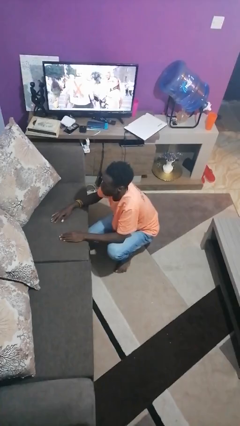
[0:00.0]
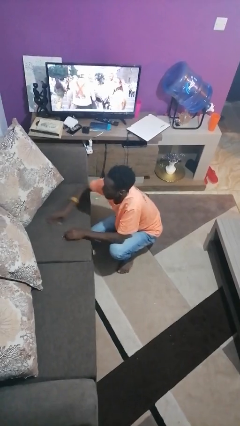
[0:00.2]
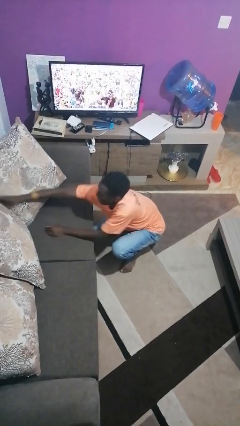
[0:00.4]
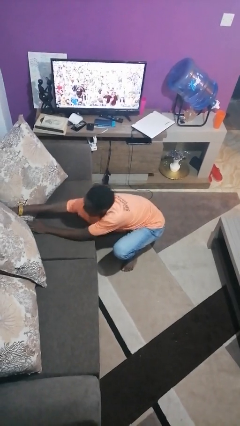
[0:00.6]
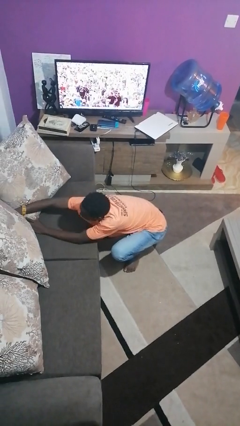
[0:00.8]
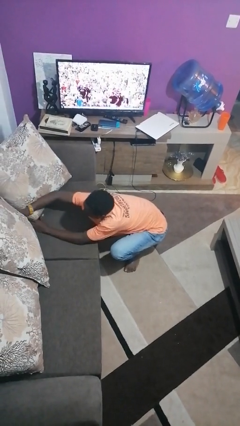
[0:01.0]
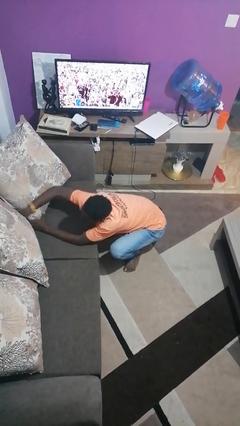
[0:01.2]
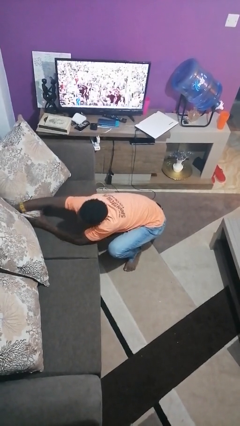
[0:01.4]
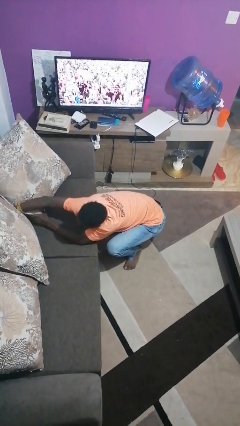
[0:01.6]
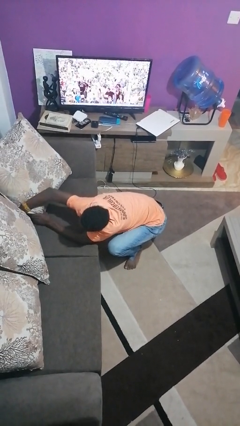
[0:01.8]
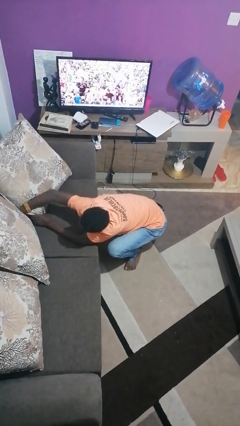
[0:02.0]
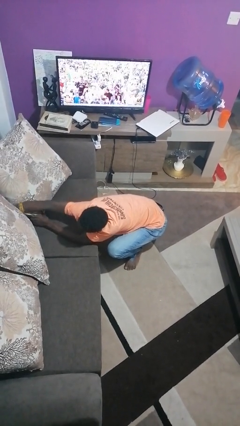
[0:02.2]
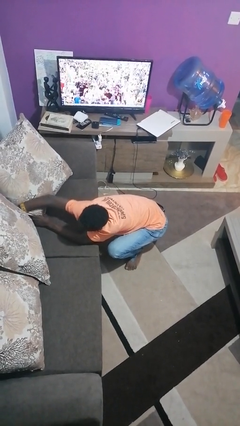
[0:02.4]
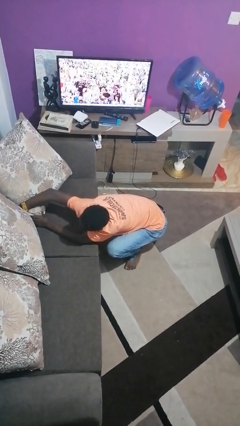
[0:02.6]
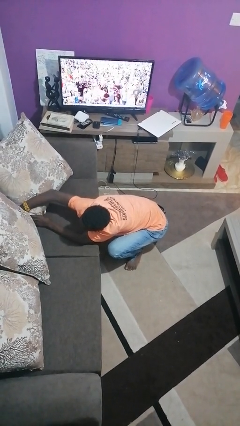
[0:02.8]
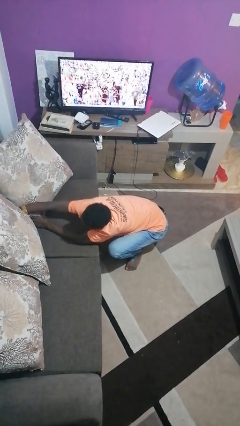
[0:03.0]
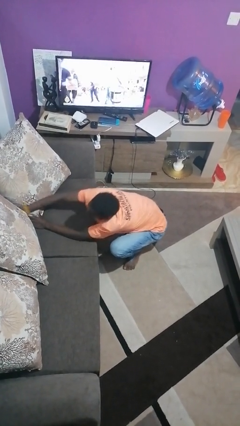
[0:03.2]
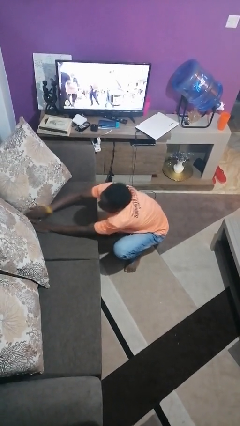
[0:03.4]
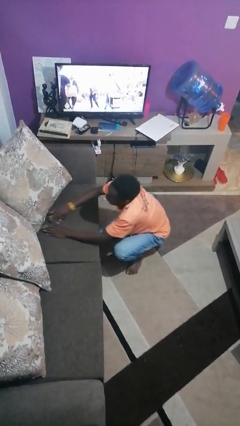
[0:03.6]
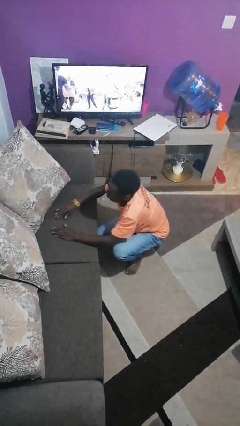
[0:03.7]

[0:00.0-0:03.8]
person searches in couch

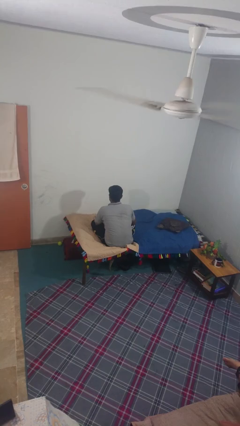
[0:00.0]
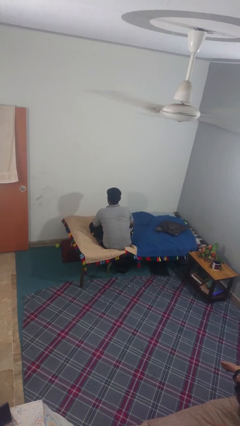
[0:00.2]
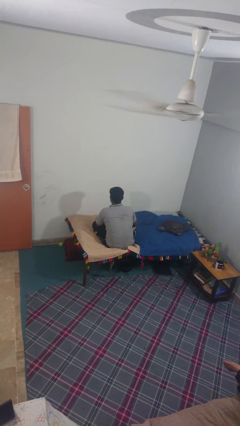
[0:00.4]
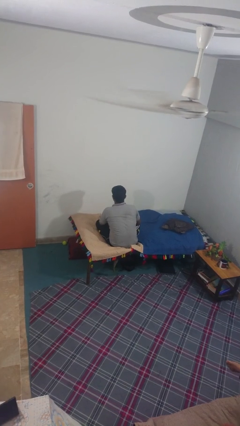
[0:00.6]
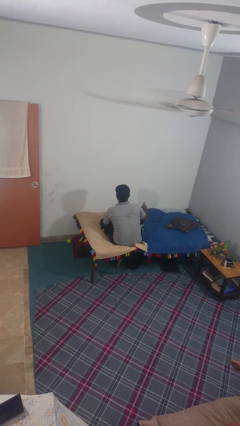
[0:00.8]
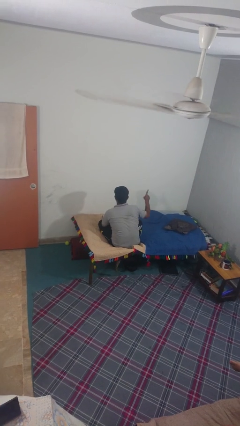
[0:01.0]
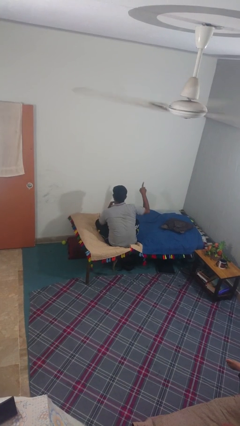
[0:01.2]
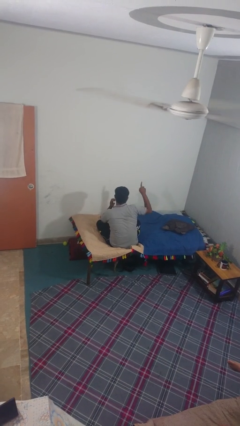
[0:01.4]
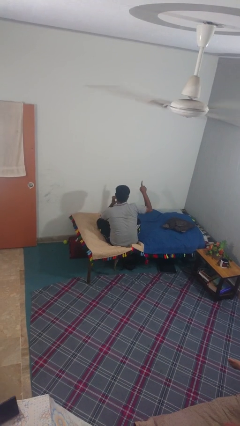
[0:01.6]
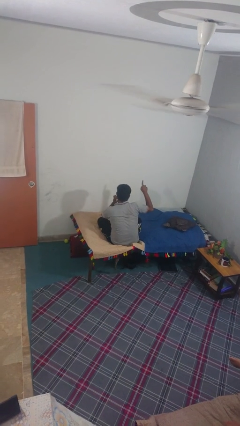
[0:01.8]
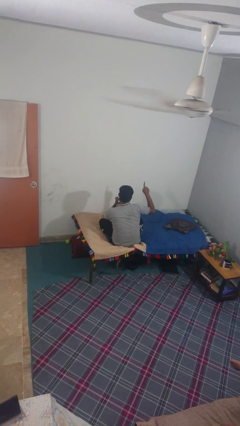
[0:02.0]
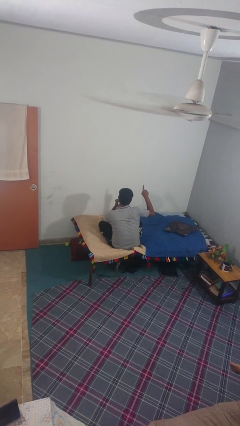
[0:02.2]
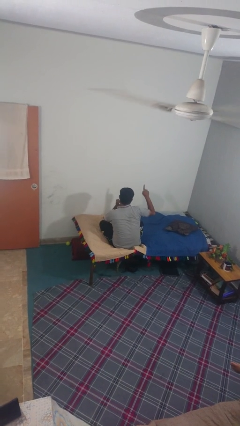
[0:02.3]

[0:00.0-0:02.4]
person gestures number one

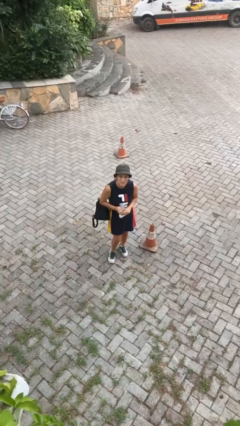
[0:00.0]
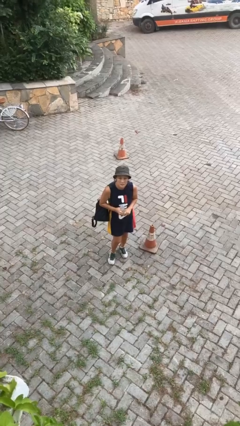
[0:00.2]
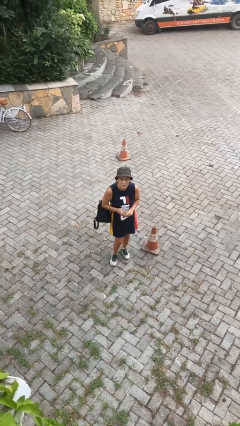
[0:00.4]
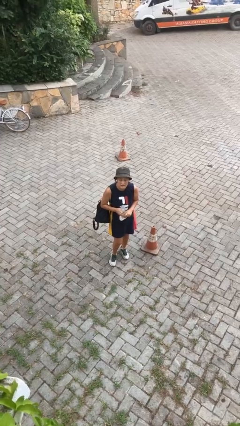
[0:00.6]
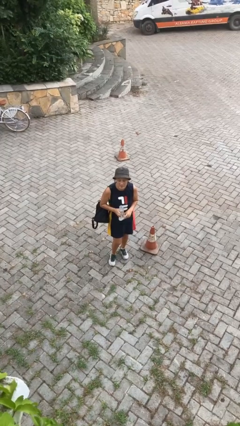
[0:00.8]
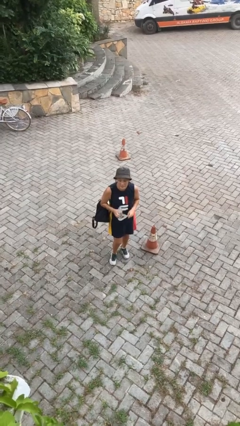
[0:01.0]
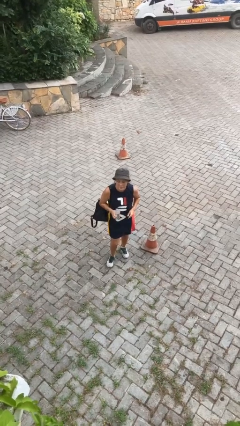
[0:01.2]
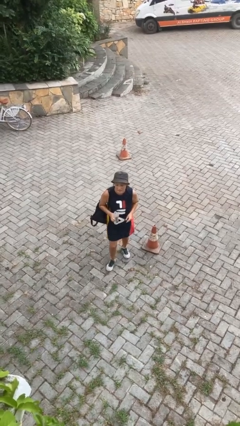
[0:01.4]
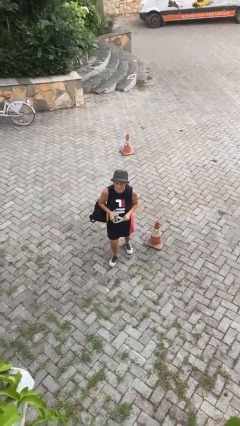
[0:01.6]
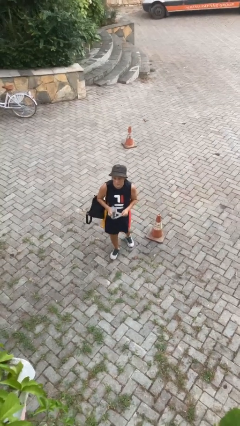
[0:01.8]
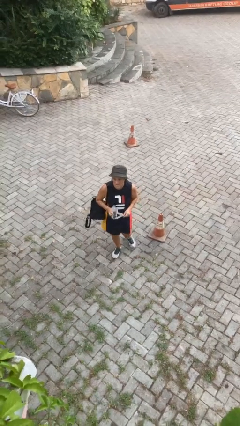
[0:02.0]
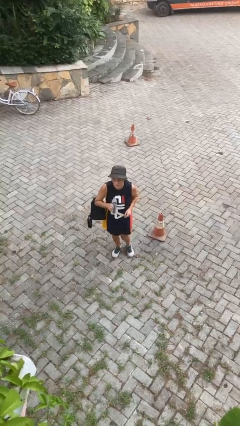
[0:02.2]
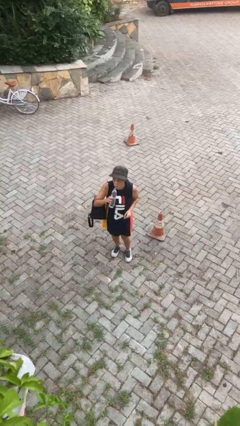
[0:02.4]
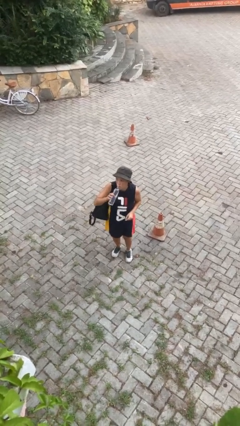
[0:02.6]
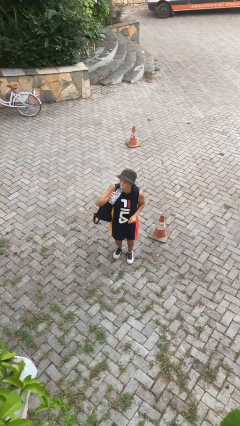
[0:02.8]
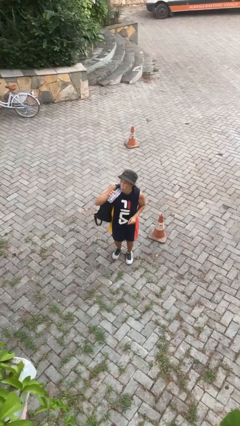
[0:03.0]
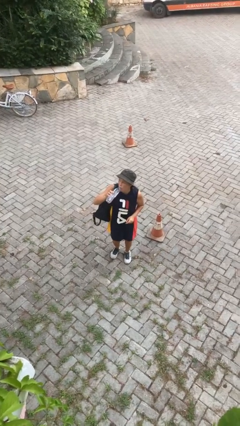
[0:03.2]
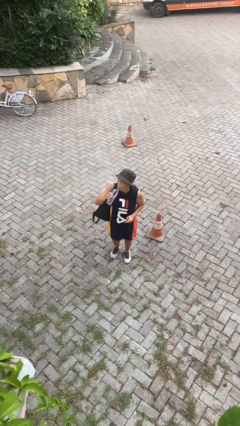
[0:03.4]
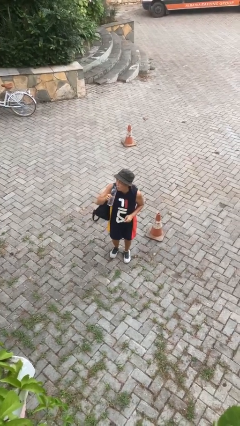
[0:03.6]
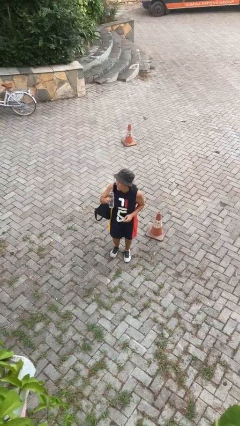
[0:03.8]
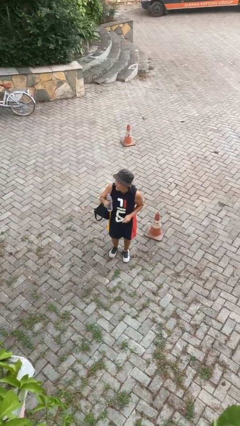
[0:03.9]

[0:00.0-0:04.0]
person drinks from bottle

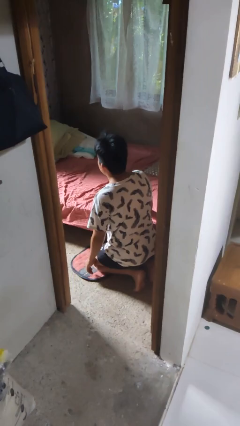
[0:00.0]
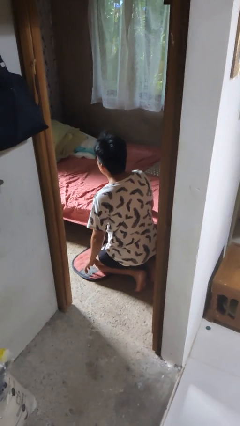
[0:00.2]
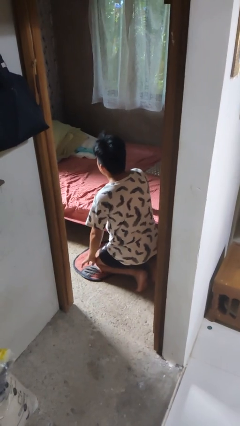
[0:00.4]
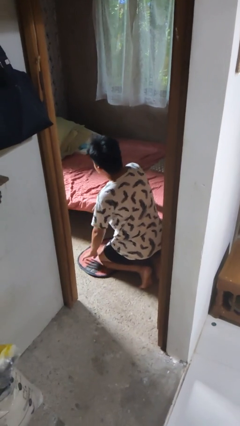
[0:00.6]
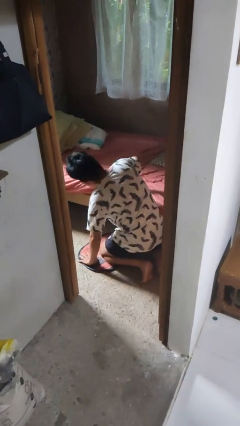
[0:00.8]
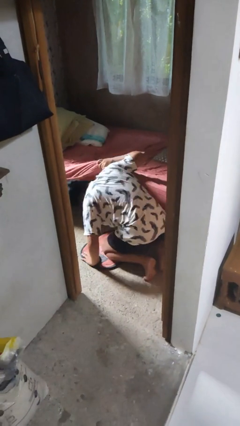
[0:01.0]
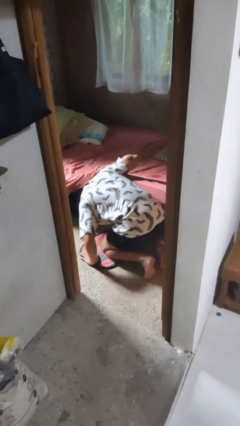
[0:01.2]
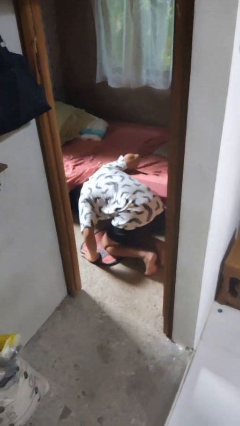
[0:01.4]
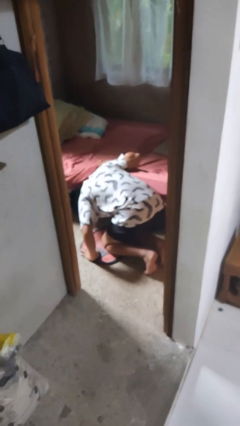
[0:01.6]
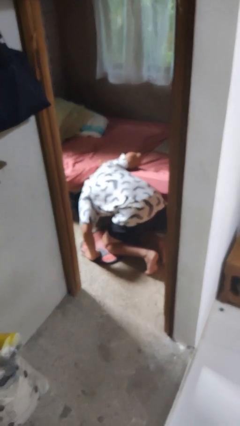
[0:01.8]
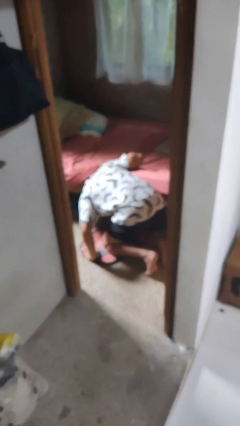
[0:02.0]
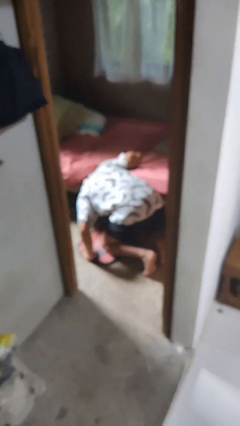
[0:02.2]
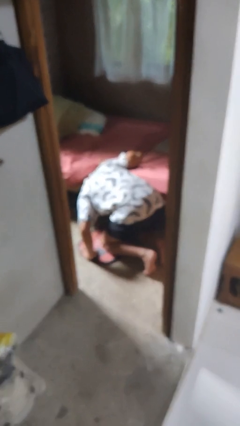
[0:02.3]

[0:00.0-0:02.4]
person searches under bed

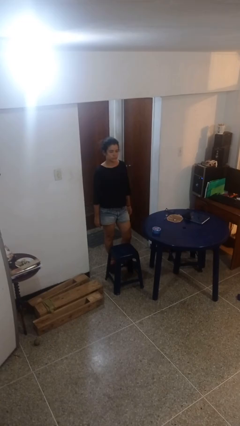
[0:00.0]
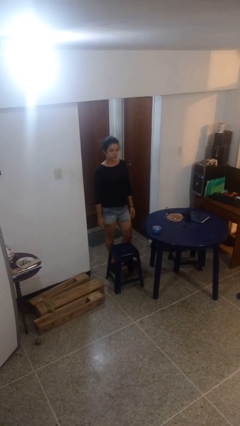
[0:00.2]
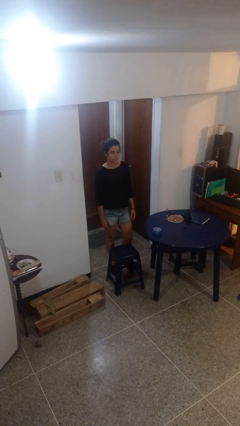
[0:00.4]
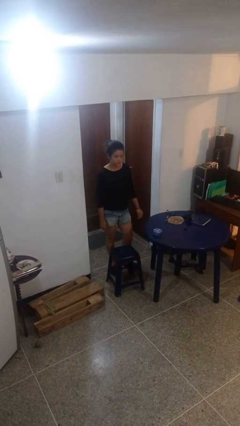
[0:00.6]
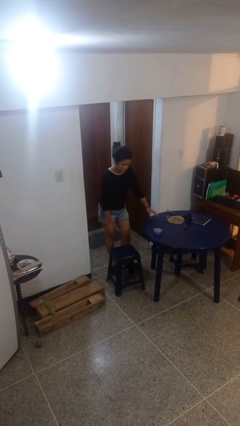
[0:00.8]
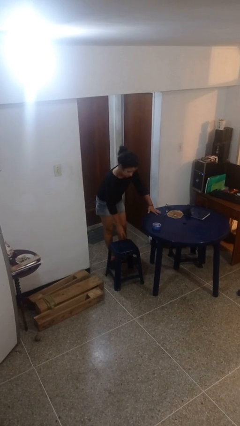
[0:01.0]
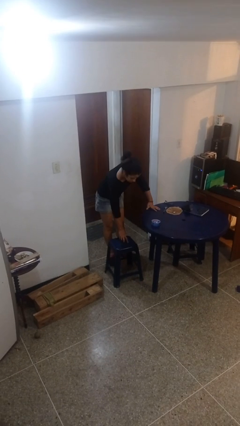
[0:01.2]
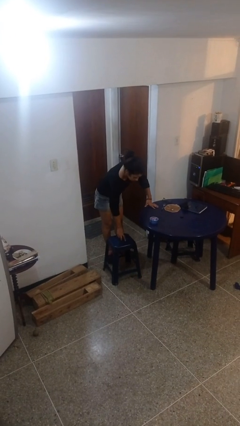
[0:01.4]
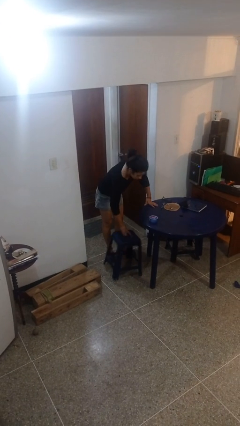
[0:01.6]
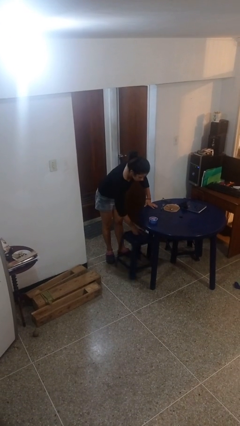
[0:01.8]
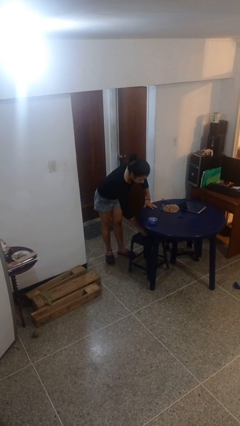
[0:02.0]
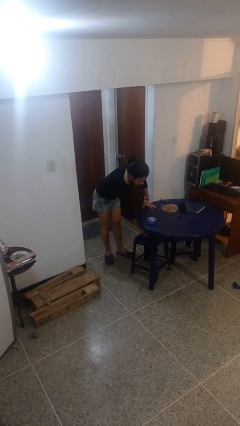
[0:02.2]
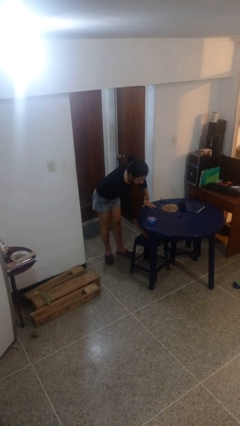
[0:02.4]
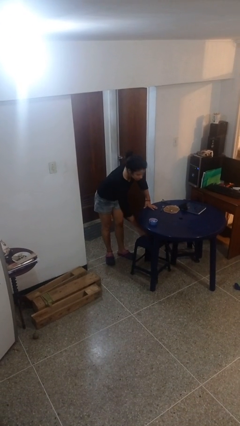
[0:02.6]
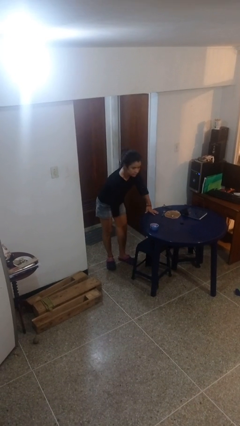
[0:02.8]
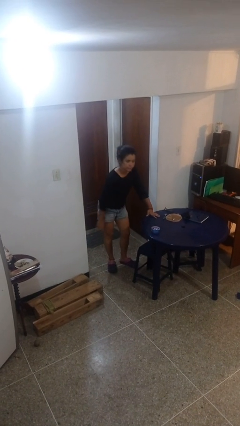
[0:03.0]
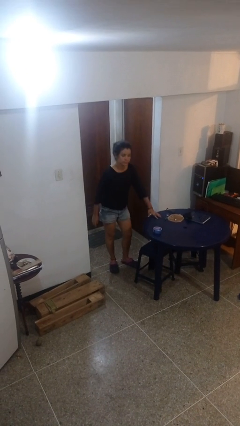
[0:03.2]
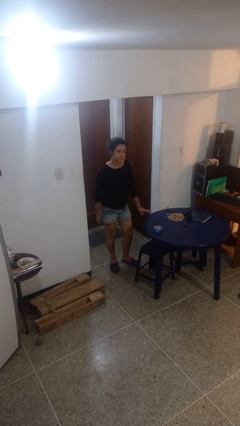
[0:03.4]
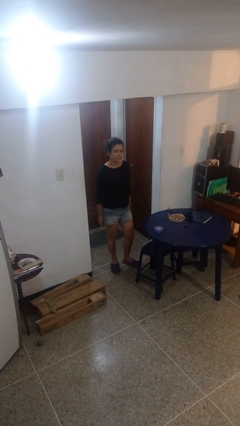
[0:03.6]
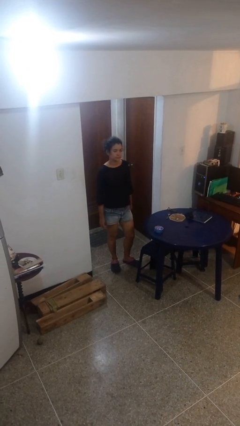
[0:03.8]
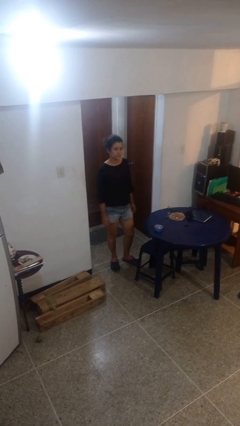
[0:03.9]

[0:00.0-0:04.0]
person pushes in chair

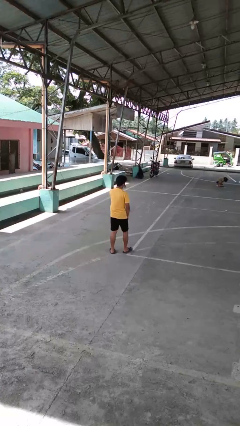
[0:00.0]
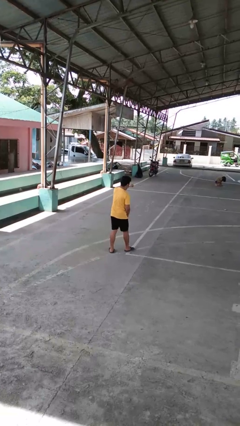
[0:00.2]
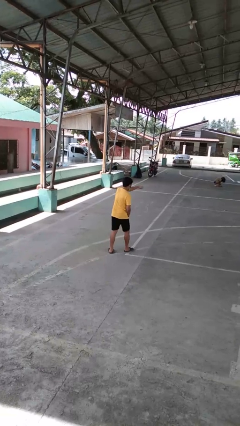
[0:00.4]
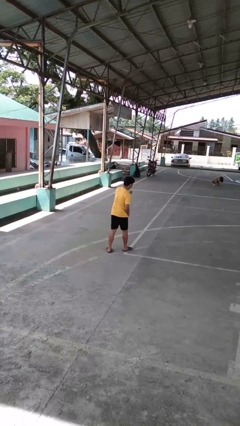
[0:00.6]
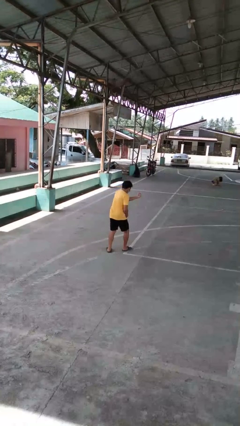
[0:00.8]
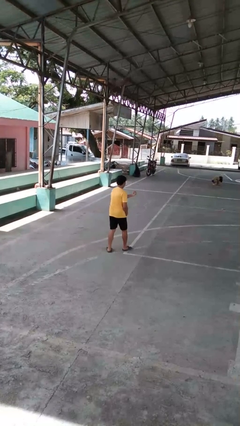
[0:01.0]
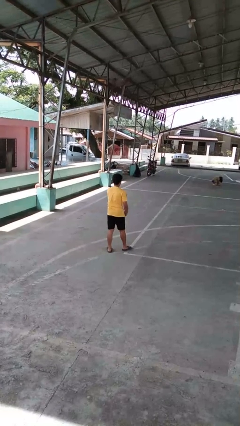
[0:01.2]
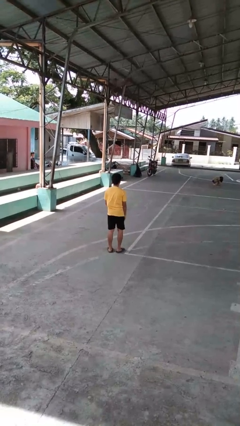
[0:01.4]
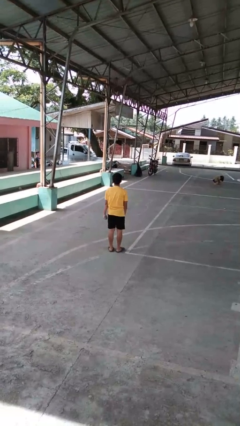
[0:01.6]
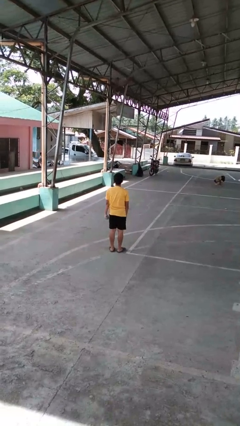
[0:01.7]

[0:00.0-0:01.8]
person punches
